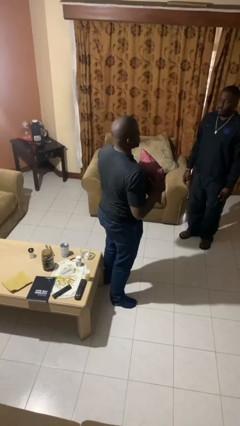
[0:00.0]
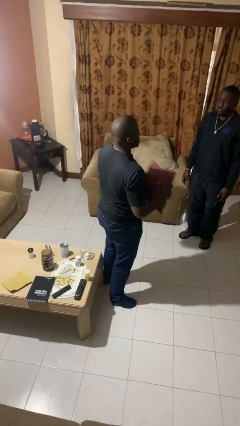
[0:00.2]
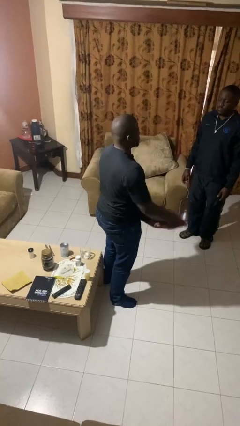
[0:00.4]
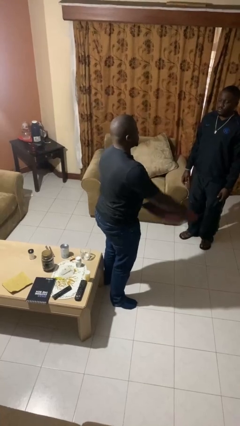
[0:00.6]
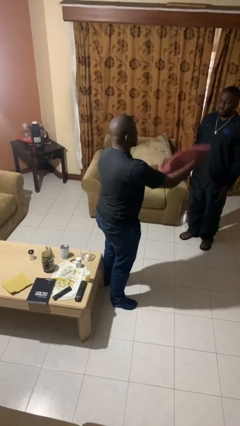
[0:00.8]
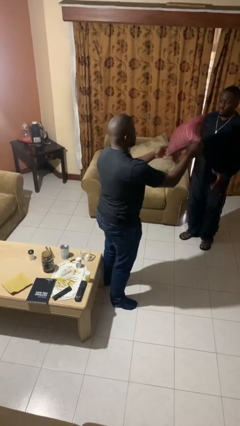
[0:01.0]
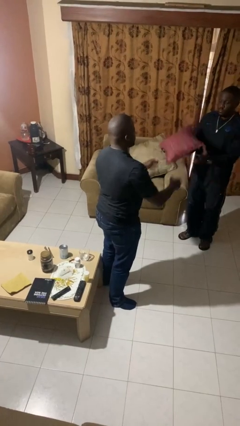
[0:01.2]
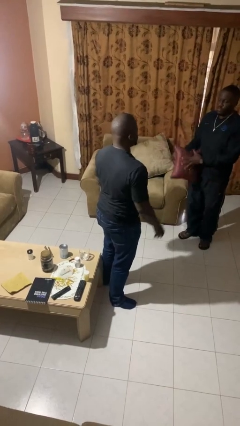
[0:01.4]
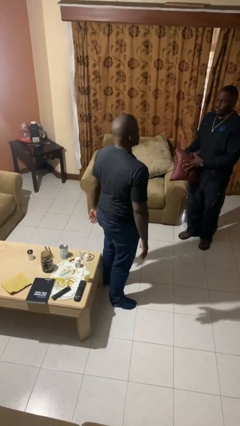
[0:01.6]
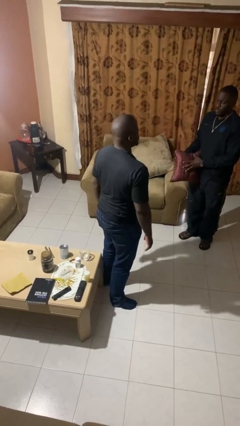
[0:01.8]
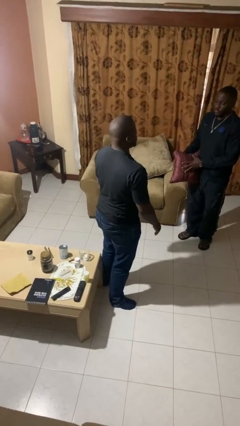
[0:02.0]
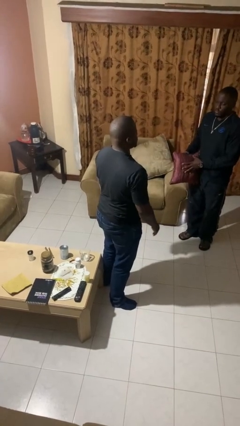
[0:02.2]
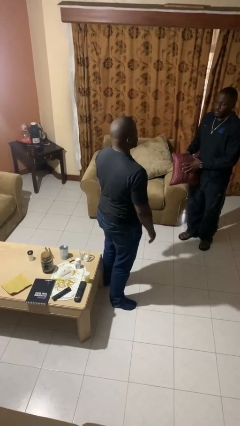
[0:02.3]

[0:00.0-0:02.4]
person throws object to person

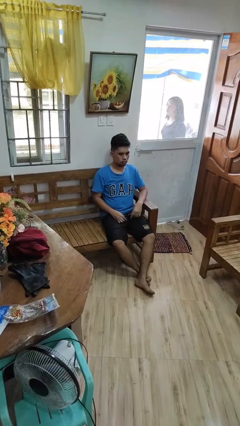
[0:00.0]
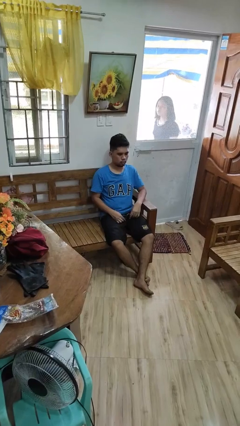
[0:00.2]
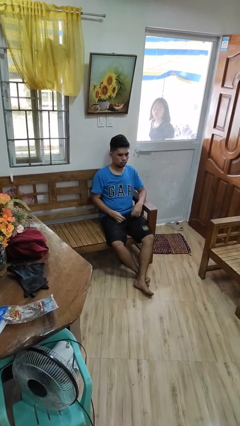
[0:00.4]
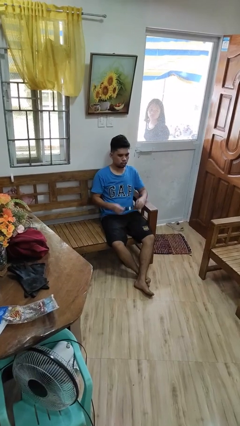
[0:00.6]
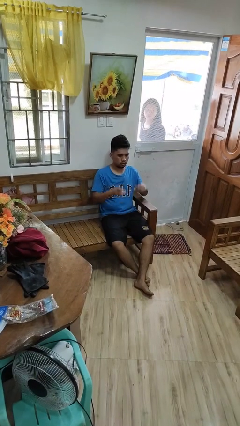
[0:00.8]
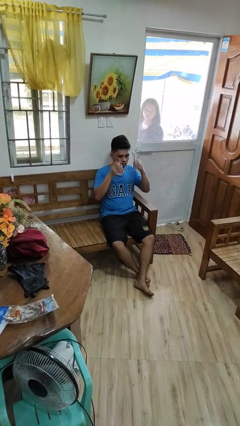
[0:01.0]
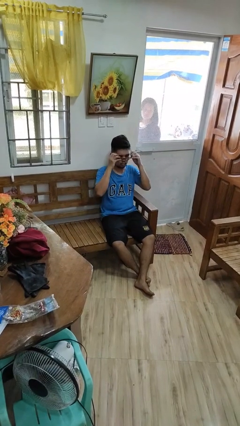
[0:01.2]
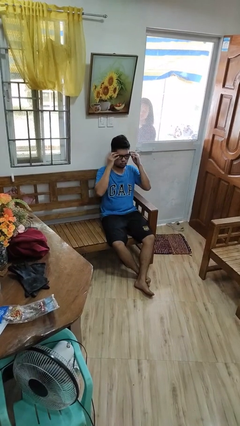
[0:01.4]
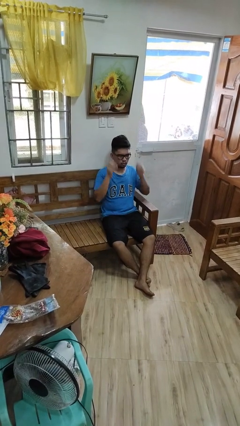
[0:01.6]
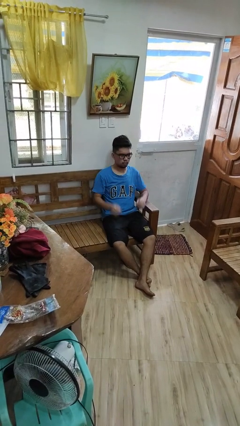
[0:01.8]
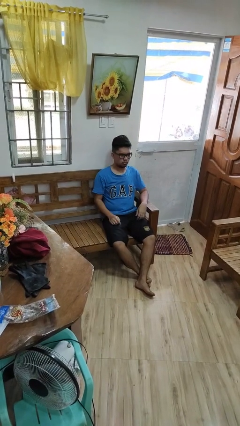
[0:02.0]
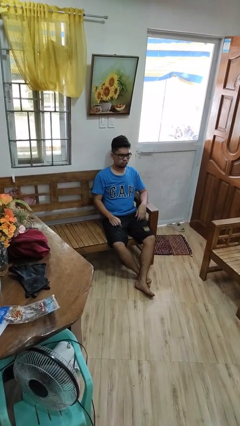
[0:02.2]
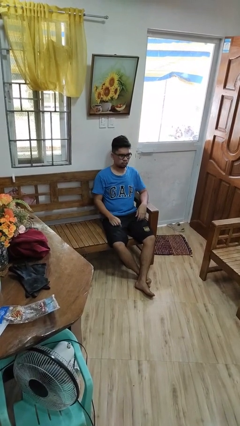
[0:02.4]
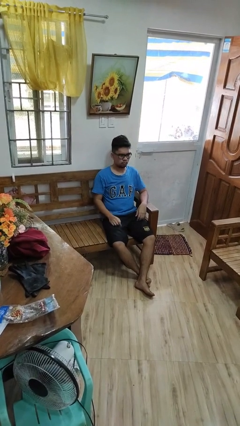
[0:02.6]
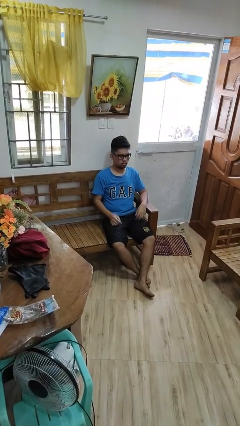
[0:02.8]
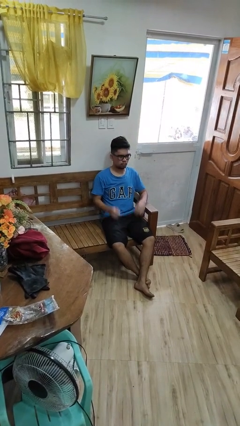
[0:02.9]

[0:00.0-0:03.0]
person puts on glasses

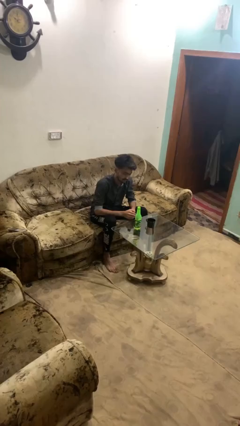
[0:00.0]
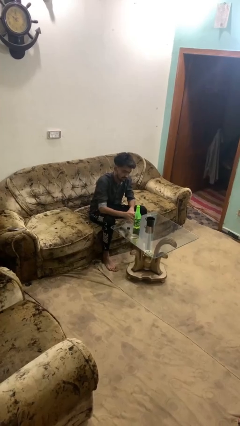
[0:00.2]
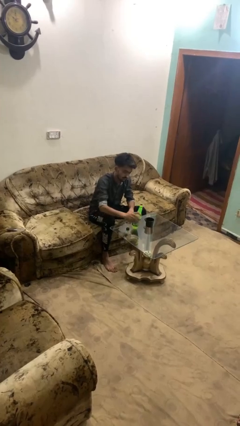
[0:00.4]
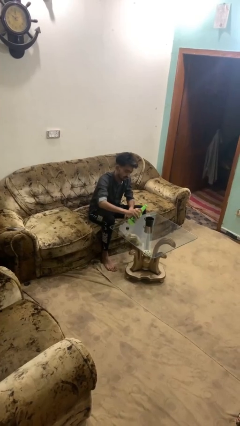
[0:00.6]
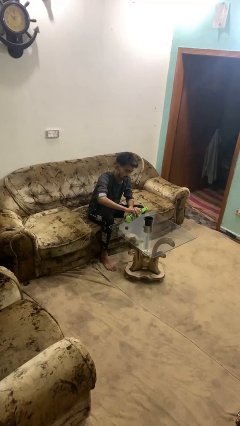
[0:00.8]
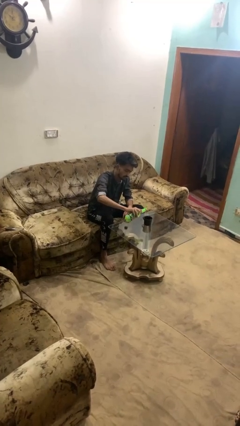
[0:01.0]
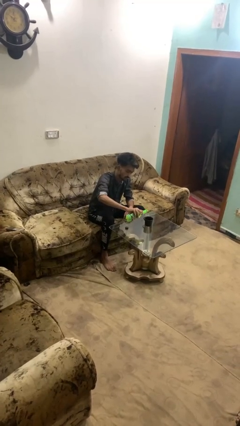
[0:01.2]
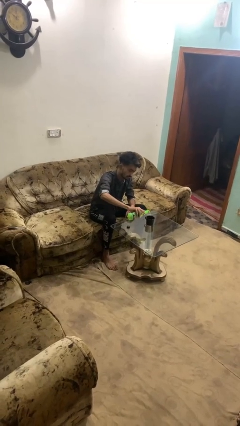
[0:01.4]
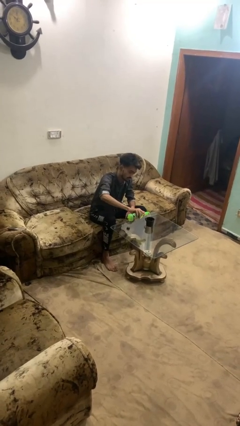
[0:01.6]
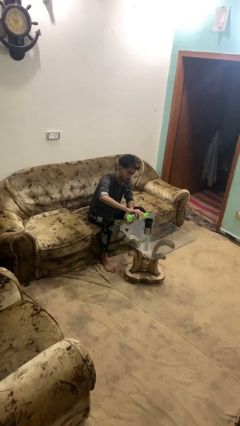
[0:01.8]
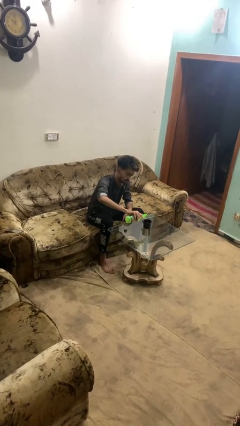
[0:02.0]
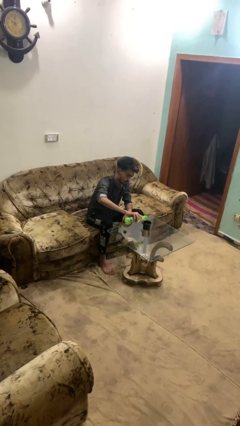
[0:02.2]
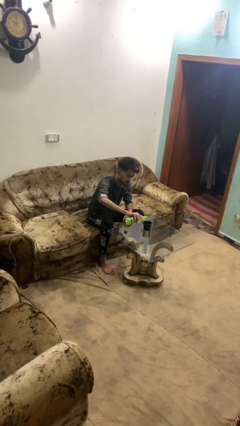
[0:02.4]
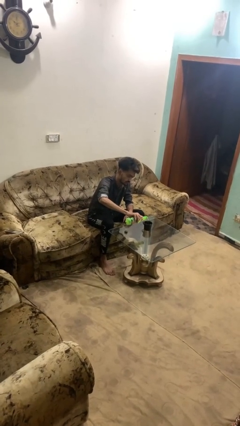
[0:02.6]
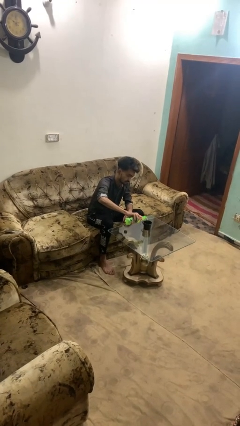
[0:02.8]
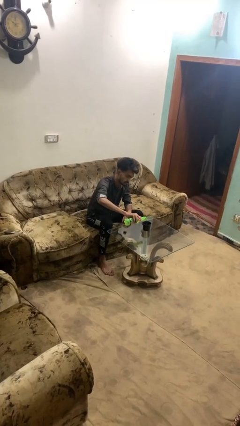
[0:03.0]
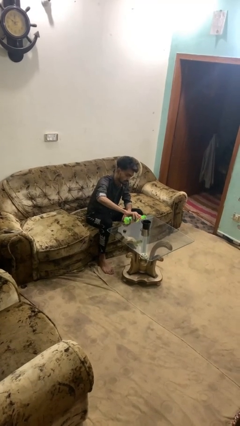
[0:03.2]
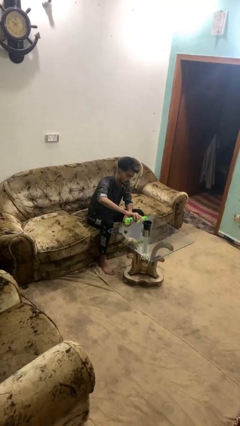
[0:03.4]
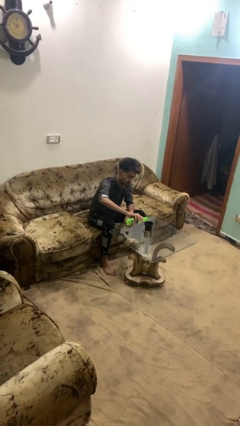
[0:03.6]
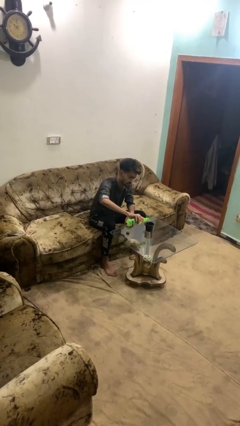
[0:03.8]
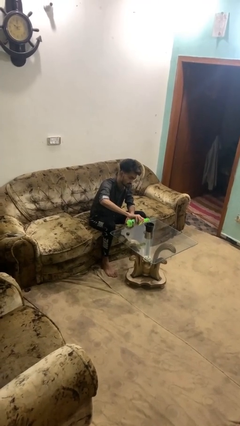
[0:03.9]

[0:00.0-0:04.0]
person pours liquid into cup

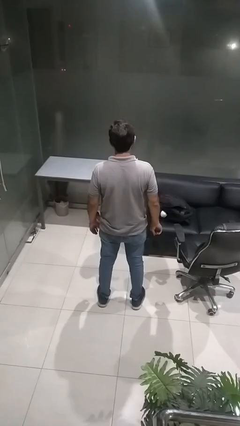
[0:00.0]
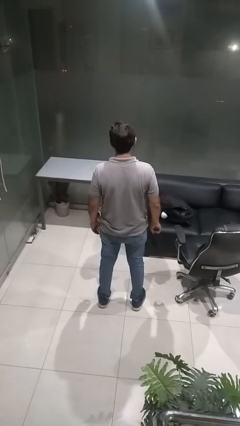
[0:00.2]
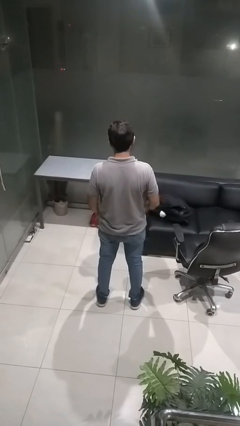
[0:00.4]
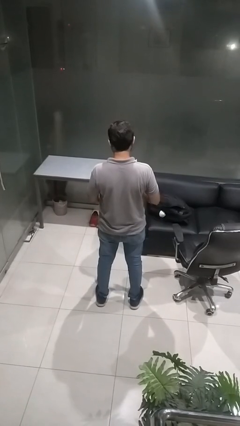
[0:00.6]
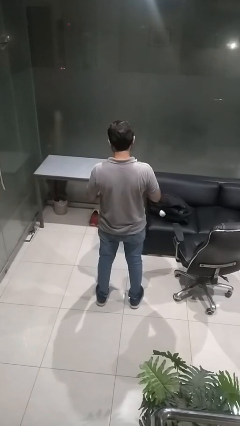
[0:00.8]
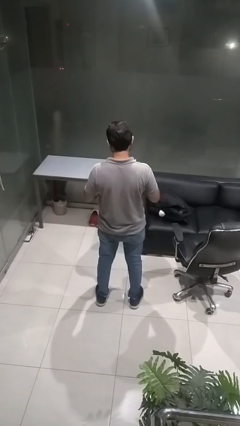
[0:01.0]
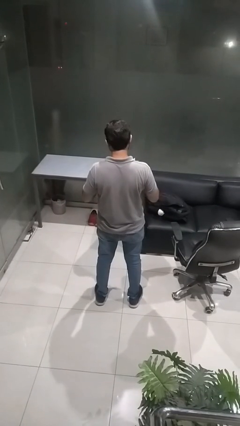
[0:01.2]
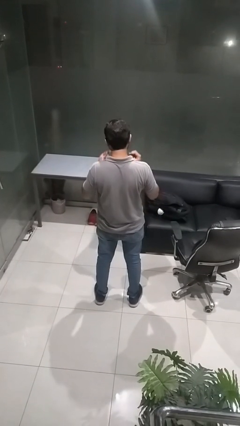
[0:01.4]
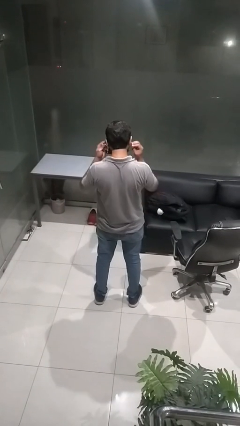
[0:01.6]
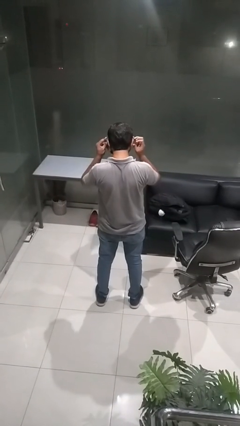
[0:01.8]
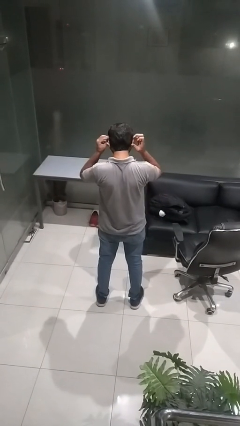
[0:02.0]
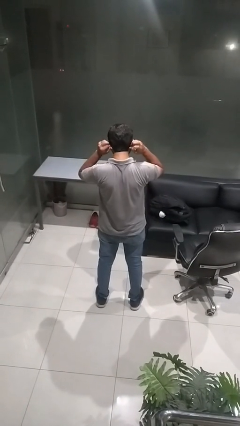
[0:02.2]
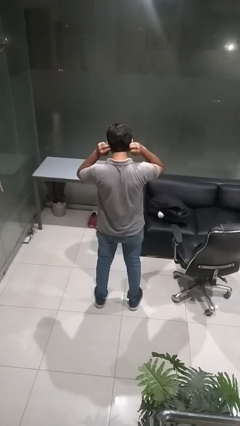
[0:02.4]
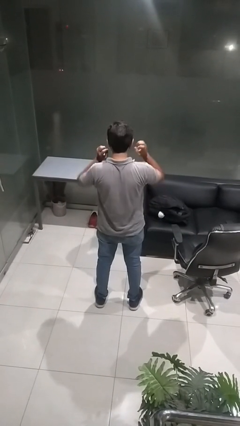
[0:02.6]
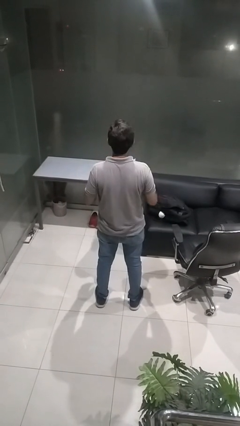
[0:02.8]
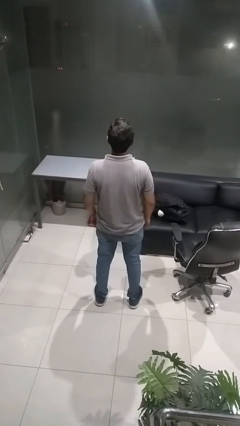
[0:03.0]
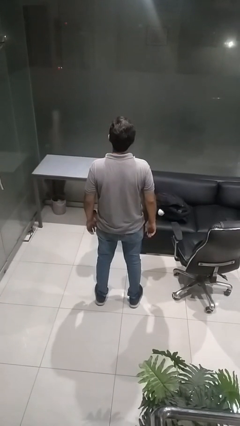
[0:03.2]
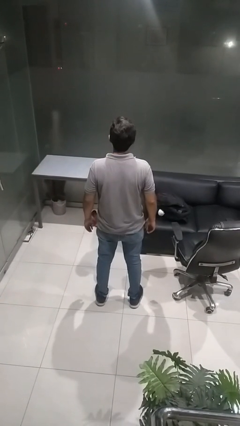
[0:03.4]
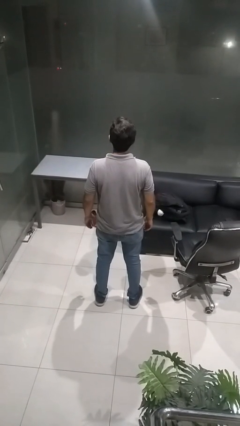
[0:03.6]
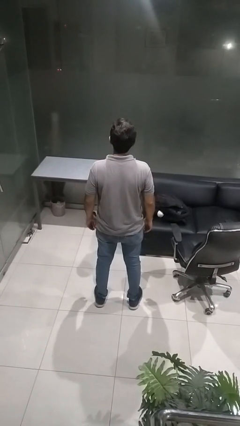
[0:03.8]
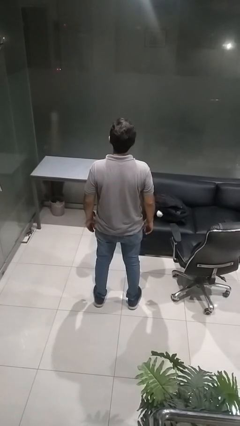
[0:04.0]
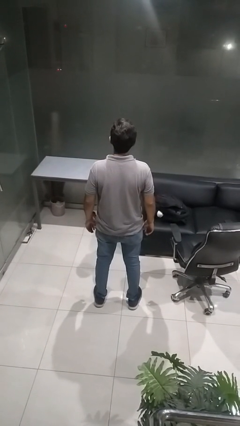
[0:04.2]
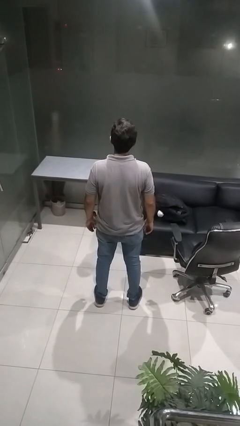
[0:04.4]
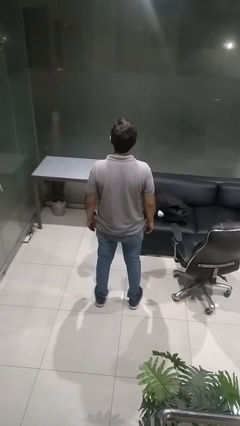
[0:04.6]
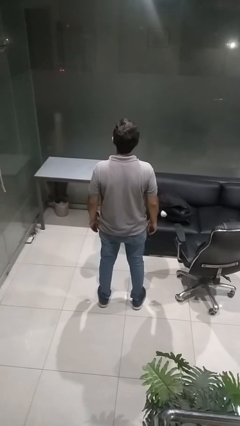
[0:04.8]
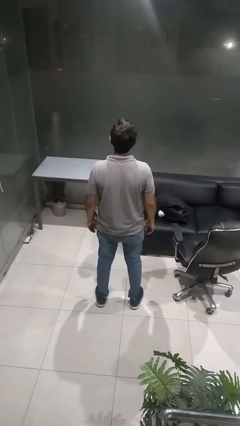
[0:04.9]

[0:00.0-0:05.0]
person puts on facemask

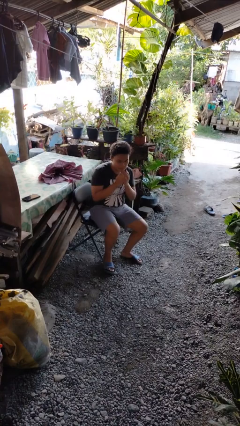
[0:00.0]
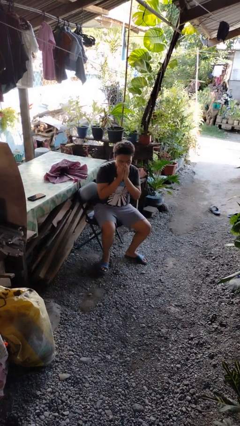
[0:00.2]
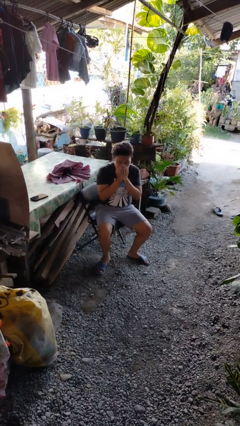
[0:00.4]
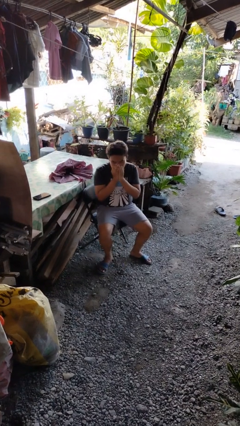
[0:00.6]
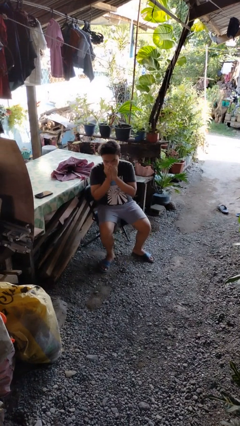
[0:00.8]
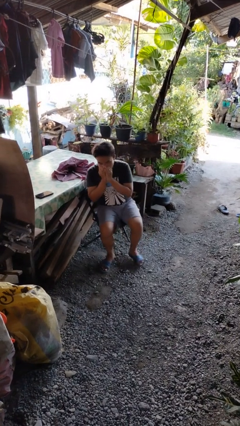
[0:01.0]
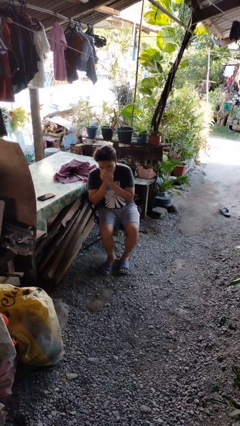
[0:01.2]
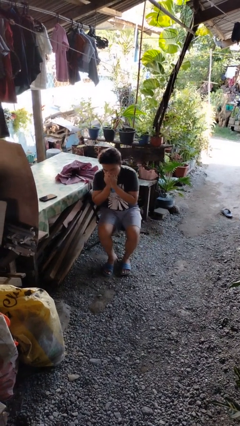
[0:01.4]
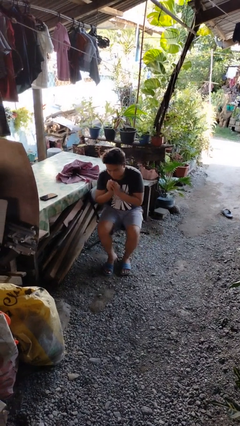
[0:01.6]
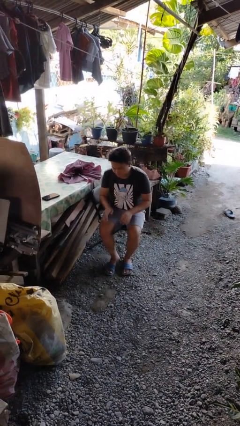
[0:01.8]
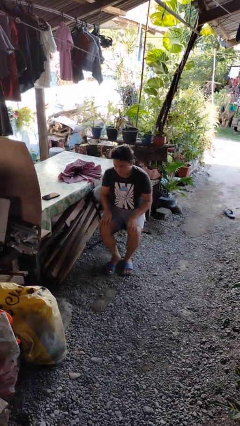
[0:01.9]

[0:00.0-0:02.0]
person blows into hands

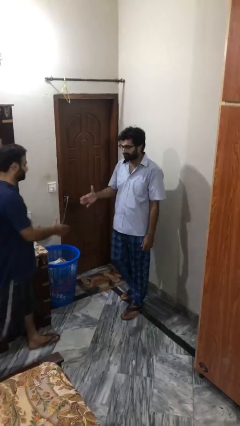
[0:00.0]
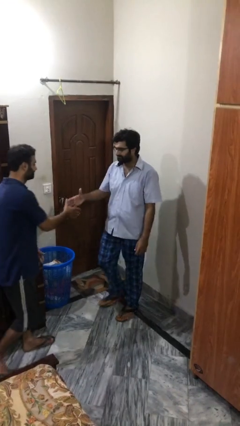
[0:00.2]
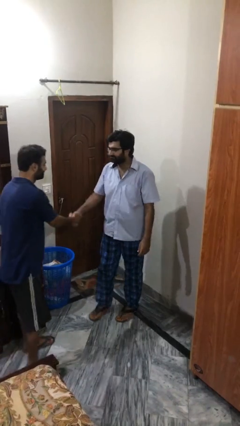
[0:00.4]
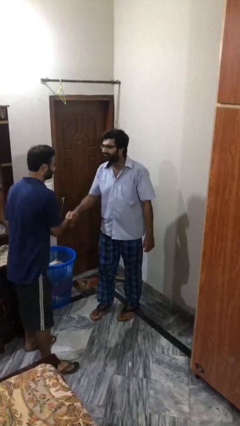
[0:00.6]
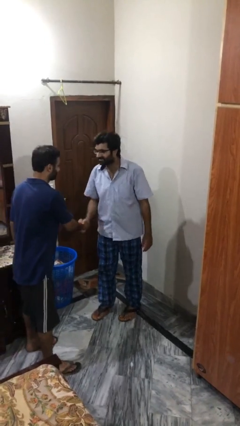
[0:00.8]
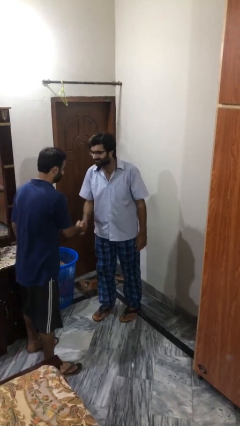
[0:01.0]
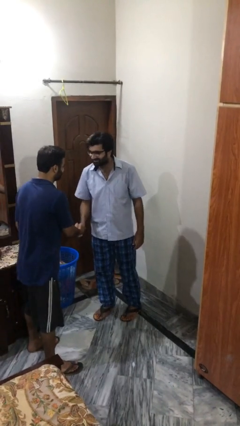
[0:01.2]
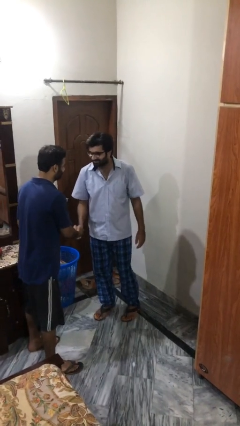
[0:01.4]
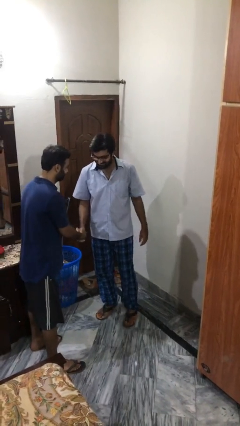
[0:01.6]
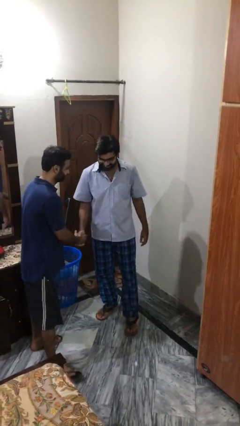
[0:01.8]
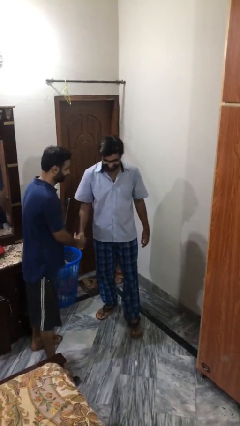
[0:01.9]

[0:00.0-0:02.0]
person shakes hand
